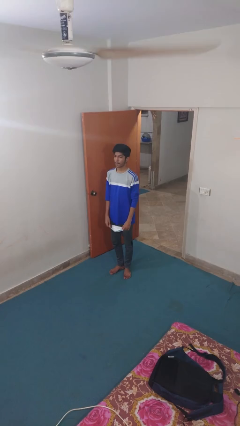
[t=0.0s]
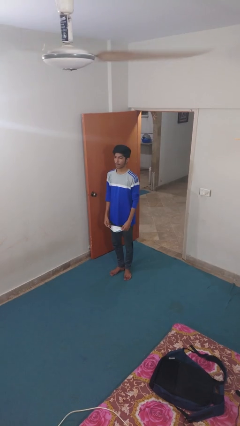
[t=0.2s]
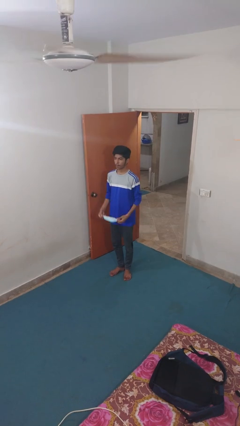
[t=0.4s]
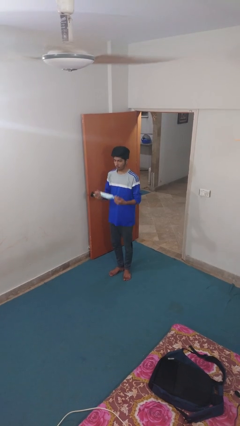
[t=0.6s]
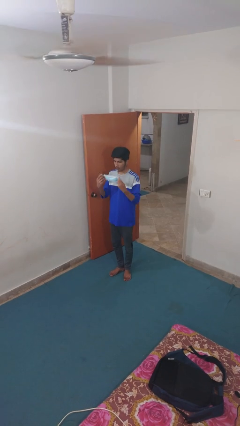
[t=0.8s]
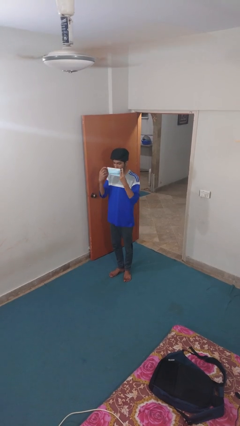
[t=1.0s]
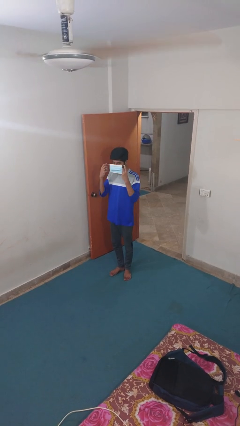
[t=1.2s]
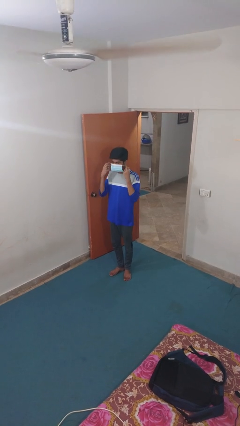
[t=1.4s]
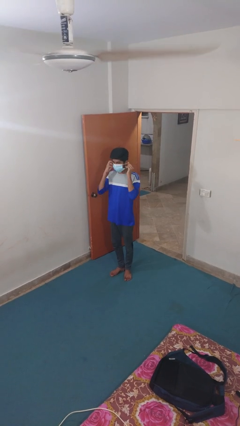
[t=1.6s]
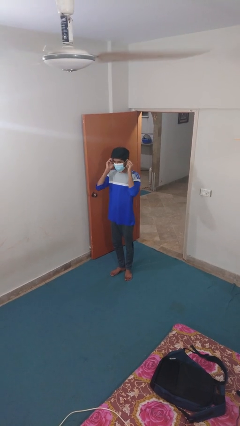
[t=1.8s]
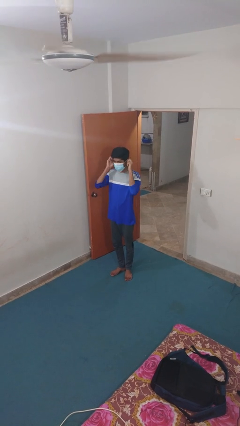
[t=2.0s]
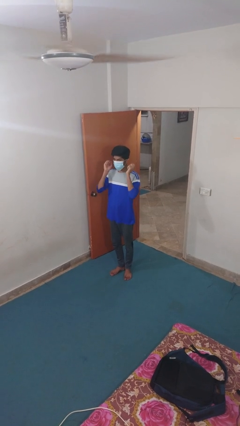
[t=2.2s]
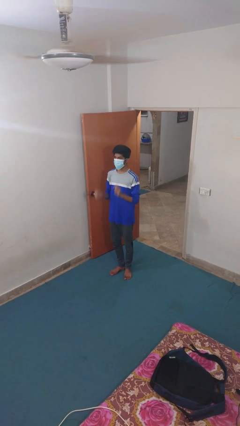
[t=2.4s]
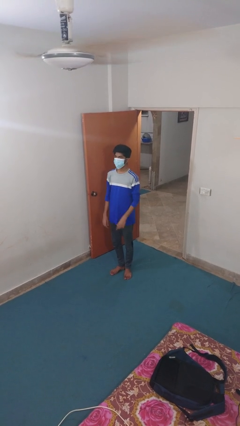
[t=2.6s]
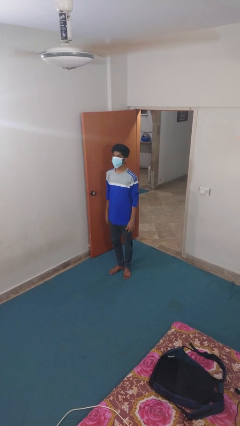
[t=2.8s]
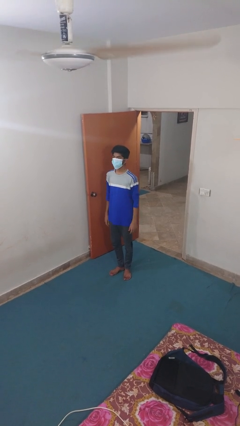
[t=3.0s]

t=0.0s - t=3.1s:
person puts on facemask

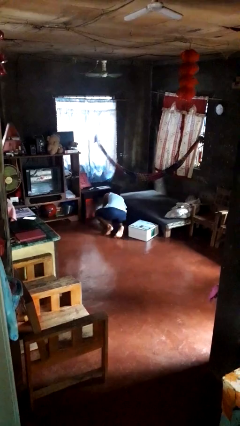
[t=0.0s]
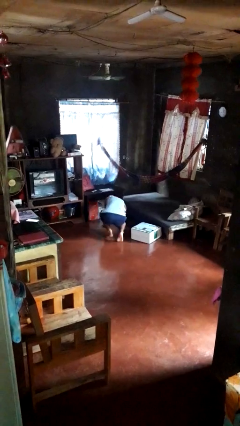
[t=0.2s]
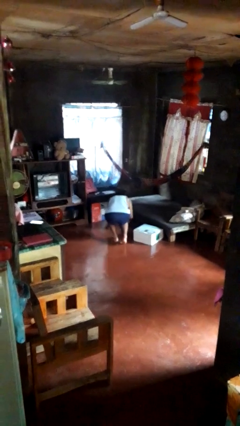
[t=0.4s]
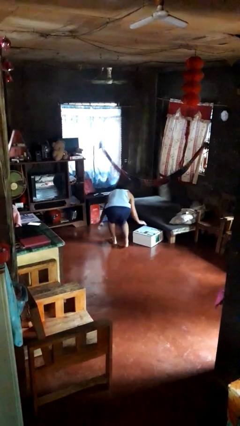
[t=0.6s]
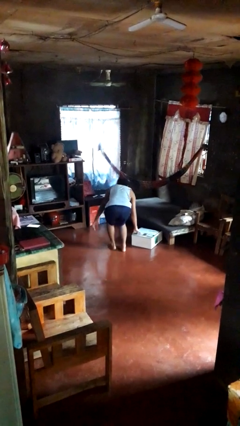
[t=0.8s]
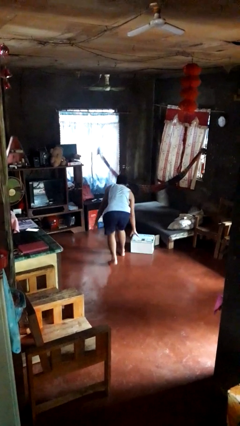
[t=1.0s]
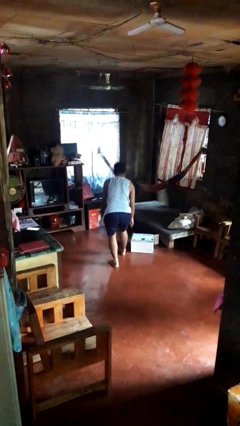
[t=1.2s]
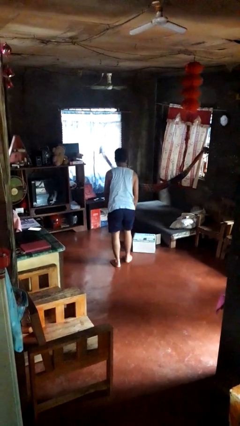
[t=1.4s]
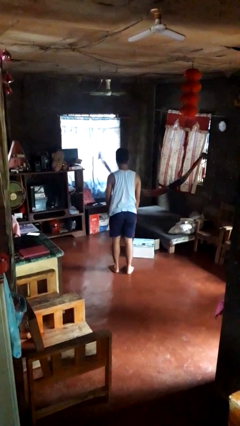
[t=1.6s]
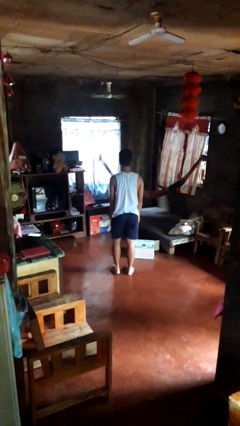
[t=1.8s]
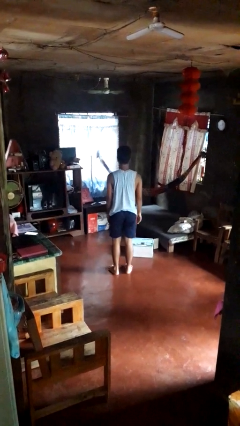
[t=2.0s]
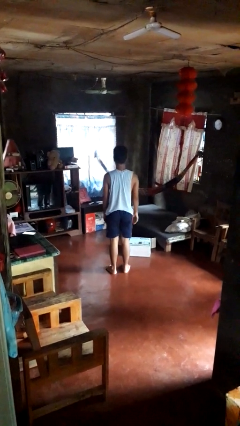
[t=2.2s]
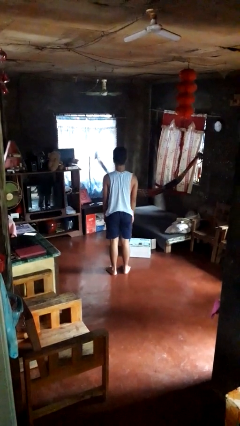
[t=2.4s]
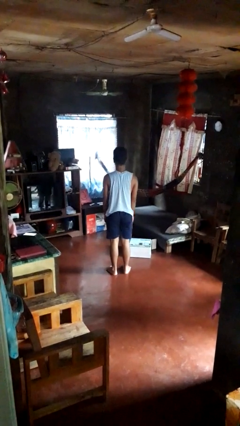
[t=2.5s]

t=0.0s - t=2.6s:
person stands up from floor

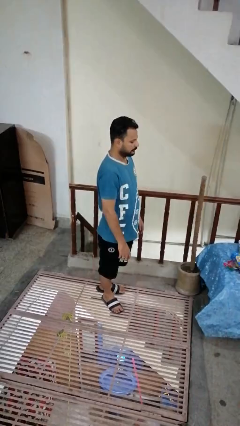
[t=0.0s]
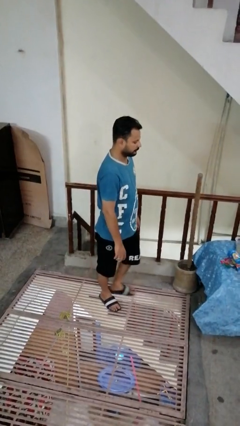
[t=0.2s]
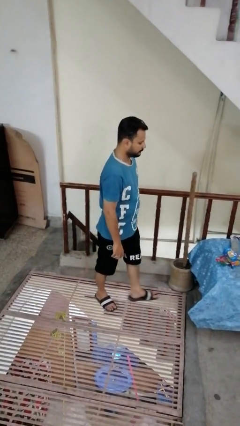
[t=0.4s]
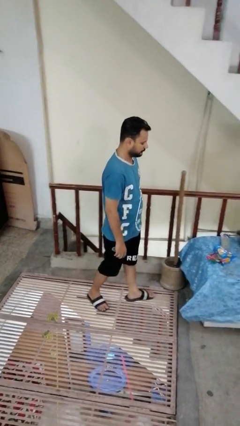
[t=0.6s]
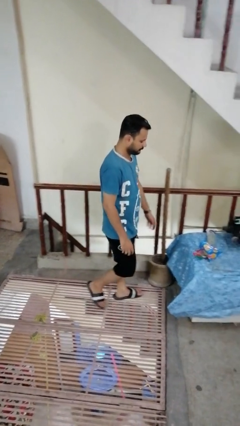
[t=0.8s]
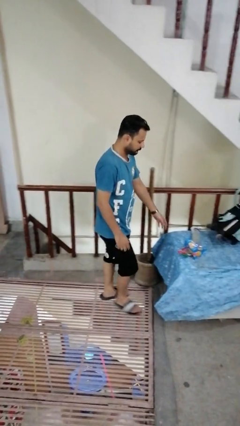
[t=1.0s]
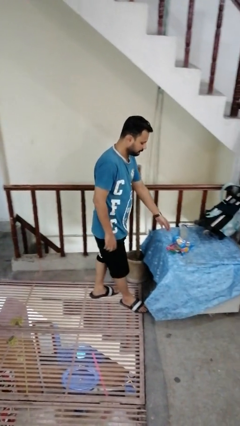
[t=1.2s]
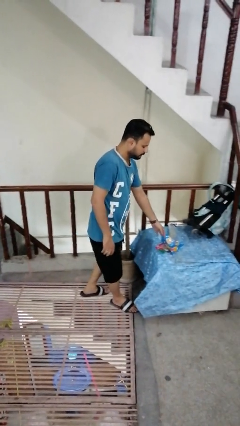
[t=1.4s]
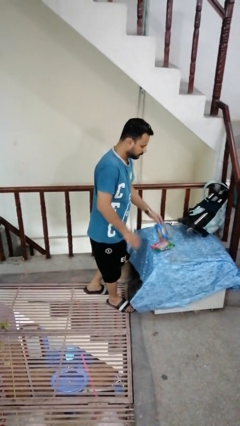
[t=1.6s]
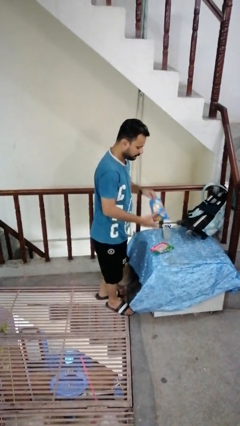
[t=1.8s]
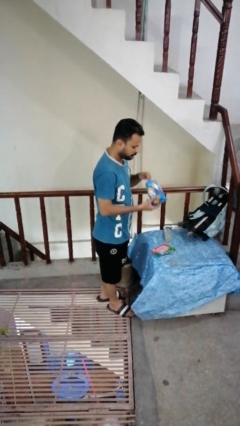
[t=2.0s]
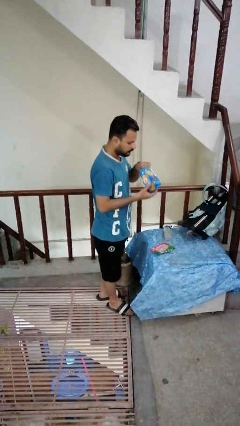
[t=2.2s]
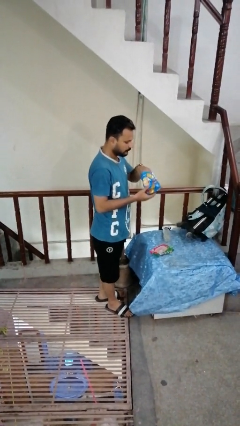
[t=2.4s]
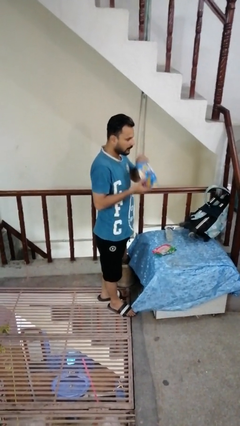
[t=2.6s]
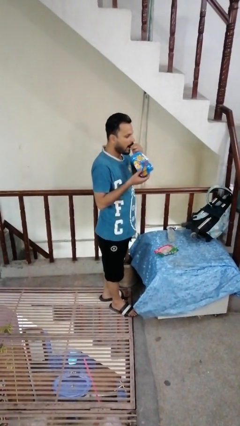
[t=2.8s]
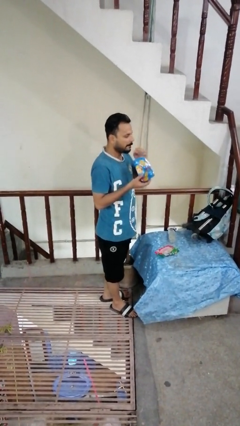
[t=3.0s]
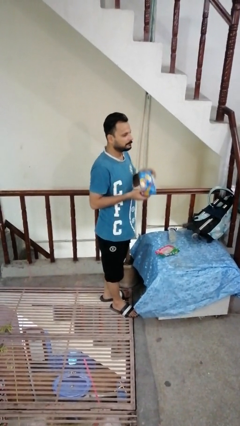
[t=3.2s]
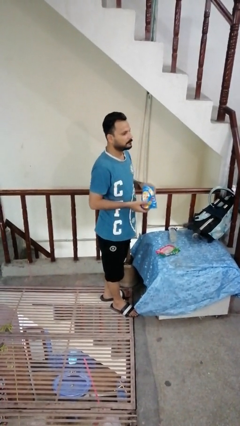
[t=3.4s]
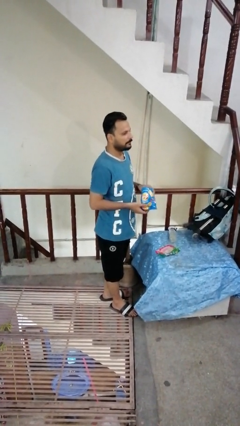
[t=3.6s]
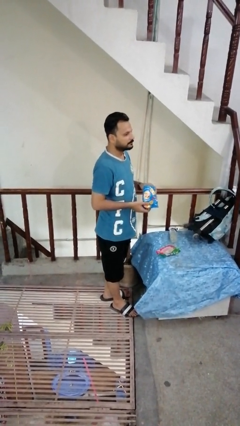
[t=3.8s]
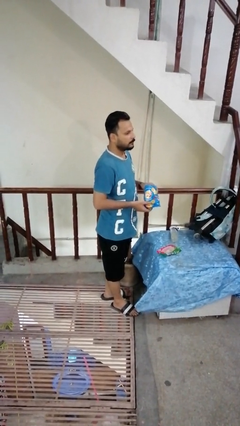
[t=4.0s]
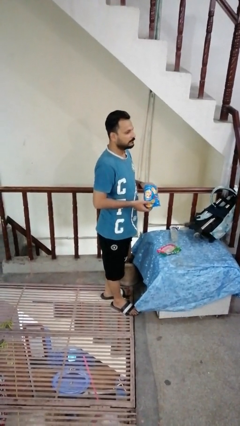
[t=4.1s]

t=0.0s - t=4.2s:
person eats snack from bag

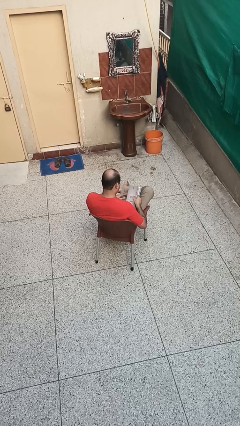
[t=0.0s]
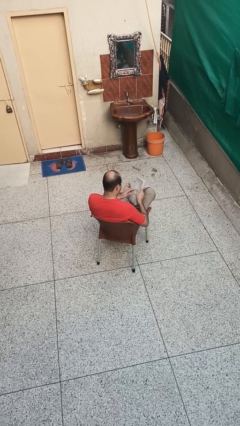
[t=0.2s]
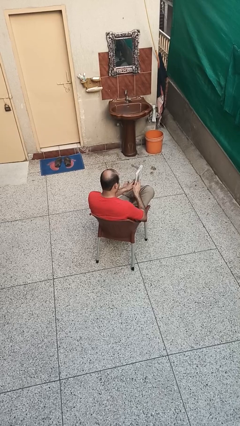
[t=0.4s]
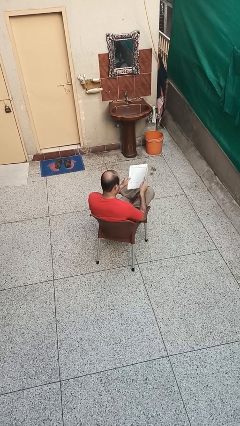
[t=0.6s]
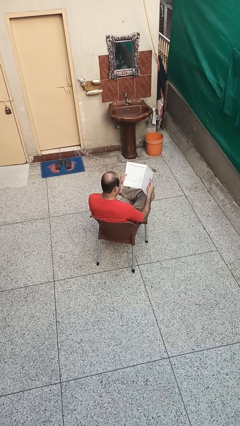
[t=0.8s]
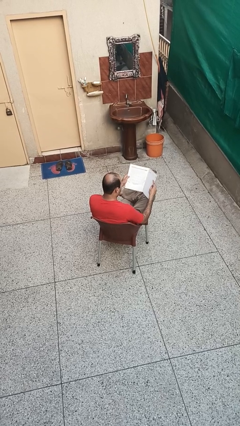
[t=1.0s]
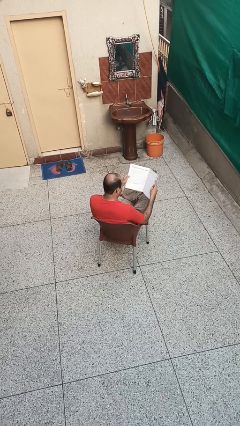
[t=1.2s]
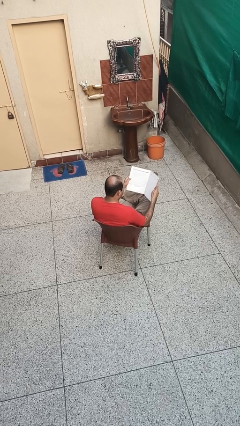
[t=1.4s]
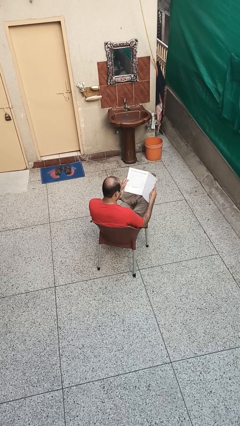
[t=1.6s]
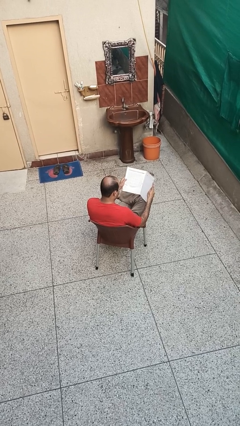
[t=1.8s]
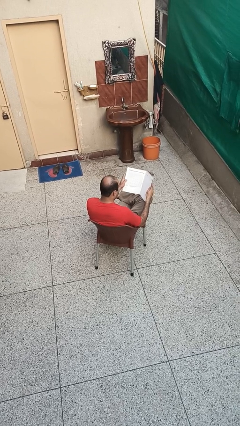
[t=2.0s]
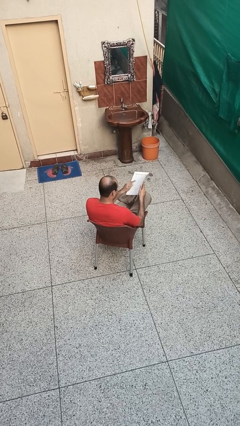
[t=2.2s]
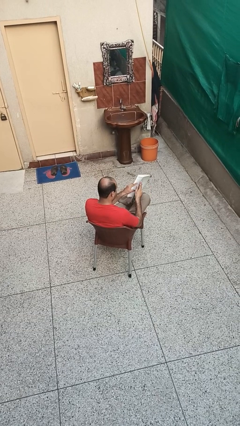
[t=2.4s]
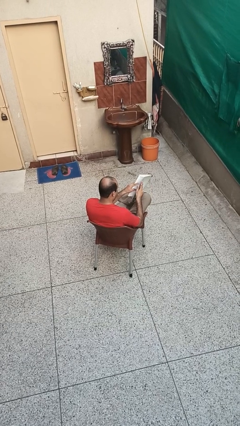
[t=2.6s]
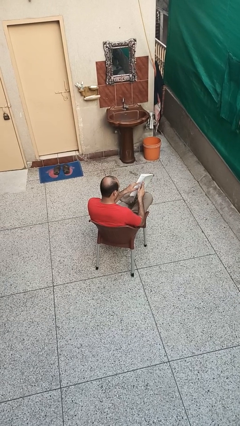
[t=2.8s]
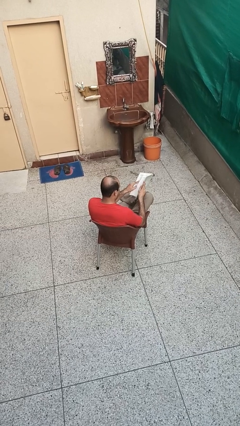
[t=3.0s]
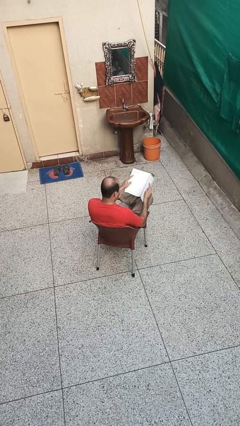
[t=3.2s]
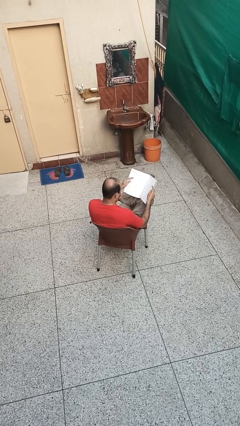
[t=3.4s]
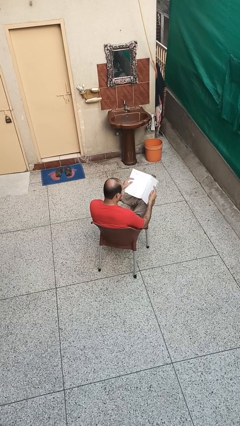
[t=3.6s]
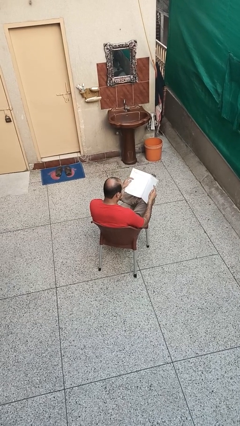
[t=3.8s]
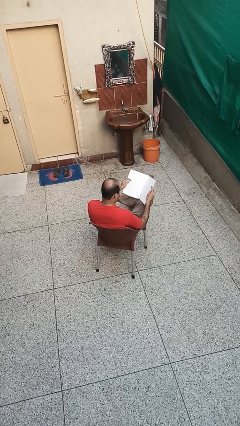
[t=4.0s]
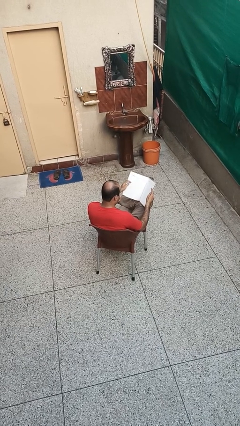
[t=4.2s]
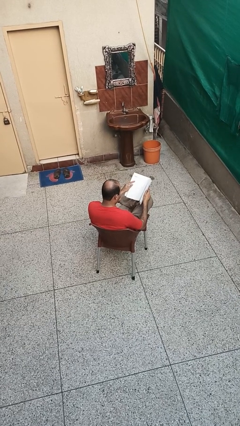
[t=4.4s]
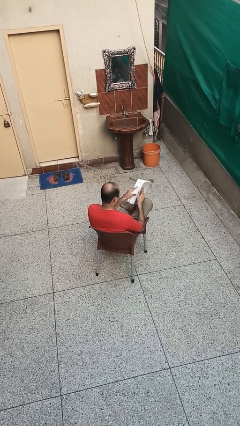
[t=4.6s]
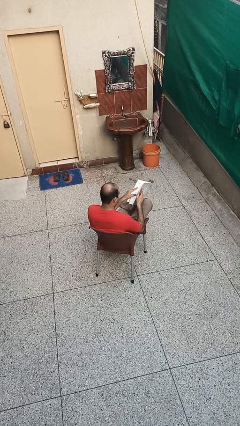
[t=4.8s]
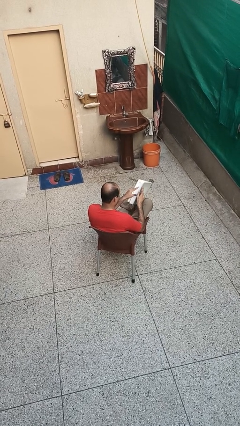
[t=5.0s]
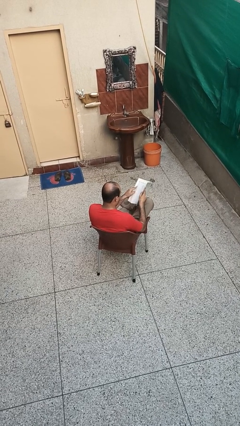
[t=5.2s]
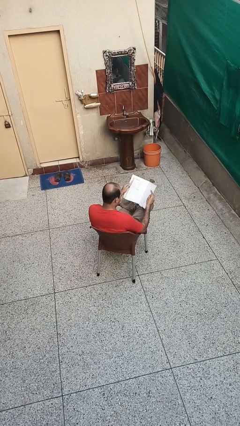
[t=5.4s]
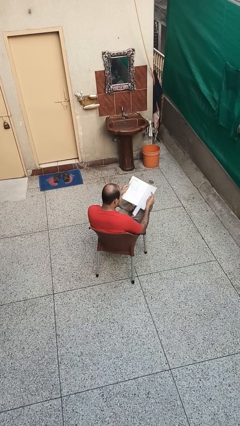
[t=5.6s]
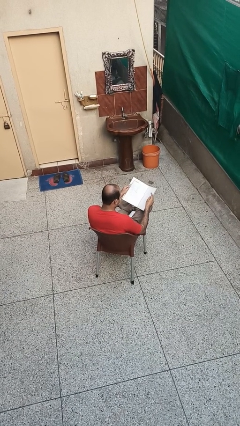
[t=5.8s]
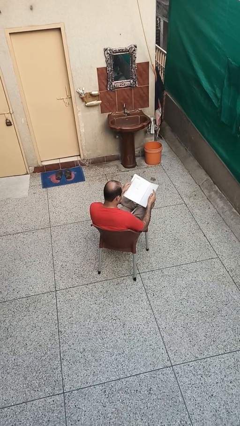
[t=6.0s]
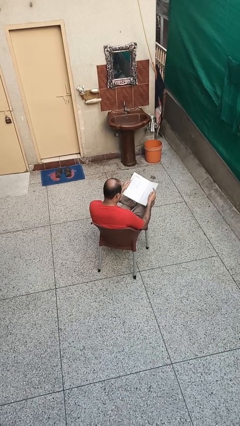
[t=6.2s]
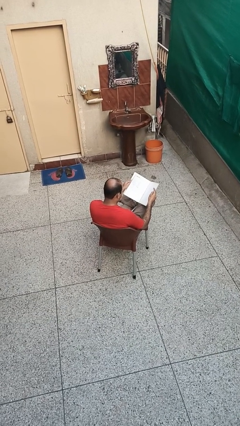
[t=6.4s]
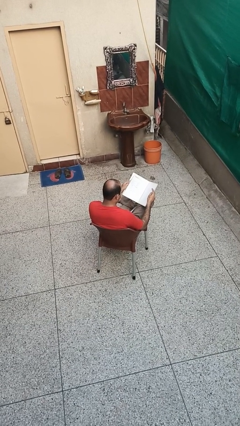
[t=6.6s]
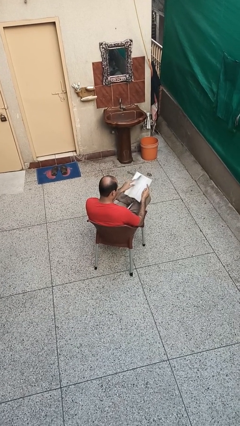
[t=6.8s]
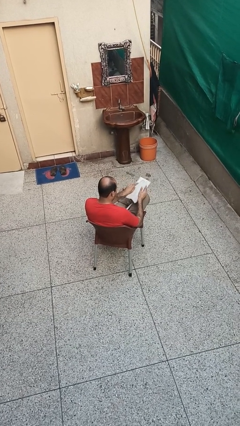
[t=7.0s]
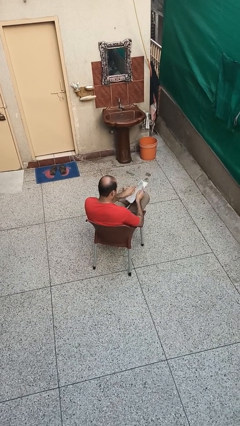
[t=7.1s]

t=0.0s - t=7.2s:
person reads book

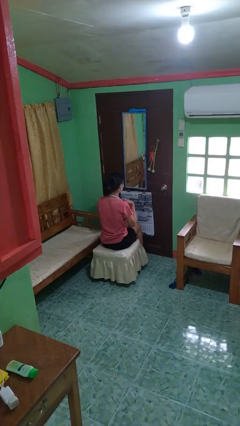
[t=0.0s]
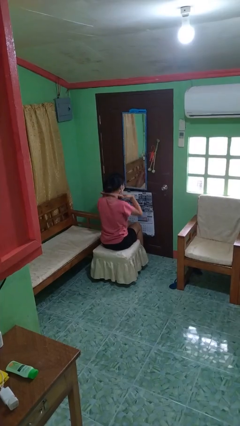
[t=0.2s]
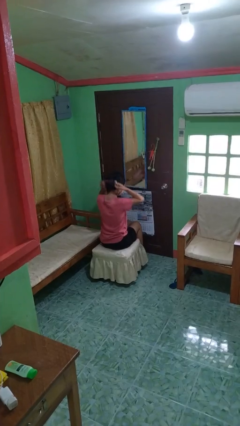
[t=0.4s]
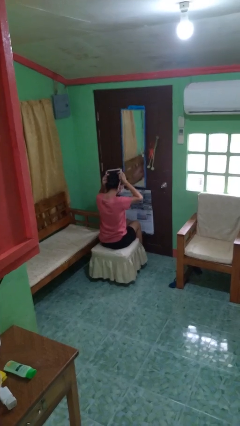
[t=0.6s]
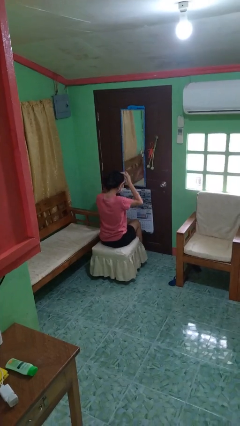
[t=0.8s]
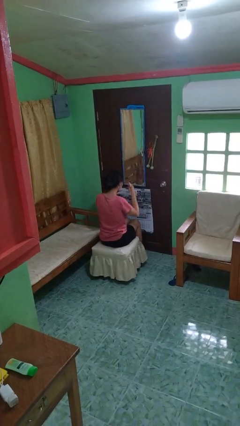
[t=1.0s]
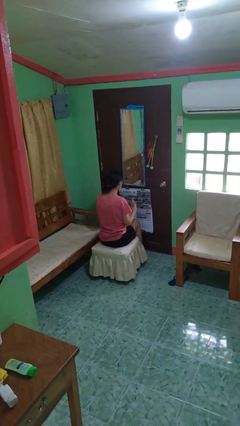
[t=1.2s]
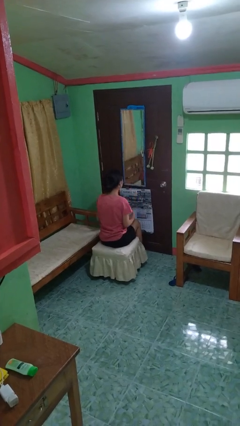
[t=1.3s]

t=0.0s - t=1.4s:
person takes off necklace
